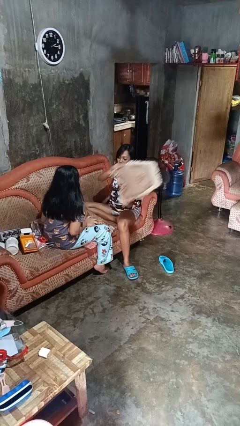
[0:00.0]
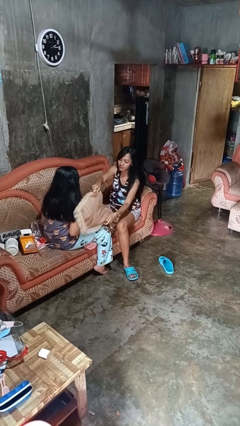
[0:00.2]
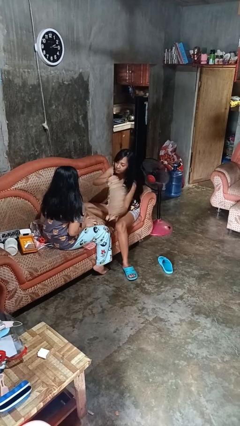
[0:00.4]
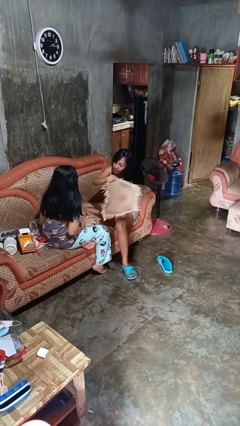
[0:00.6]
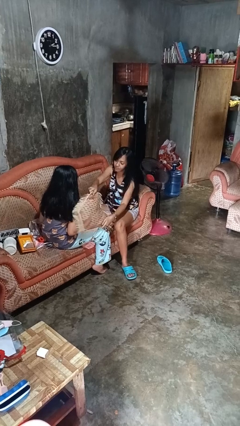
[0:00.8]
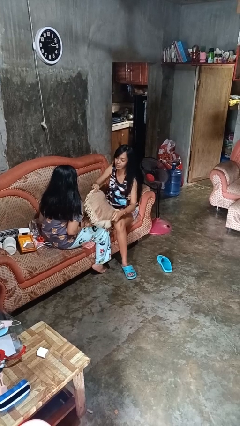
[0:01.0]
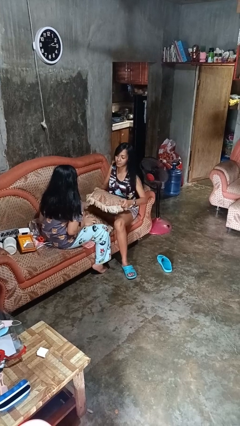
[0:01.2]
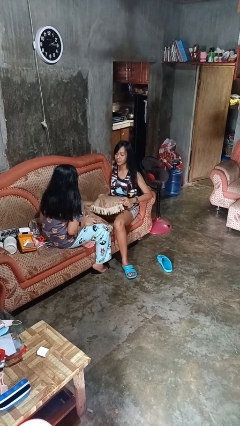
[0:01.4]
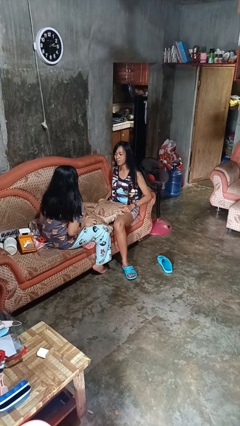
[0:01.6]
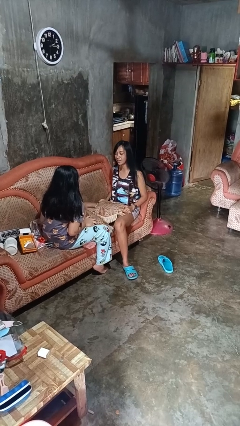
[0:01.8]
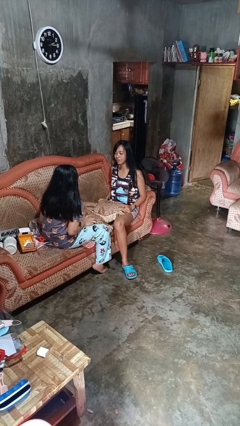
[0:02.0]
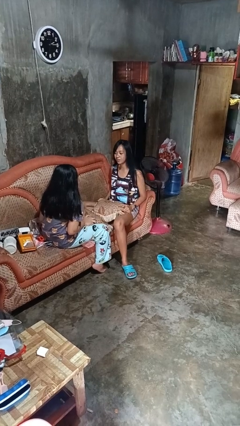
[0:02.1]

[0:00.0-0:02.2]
person hits person with pillow

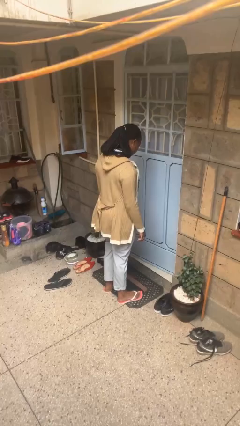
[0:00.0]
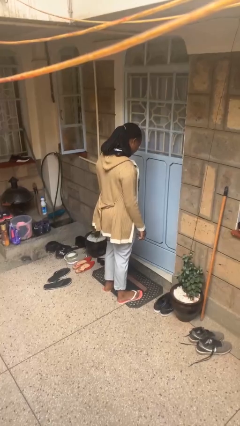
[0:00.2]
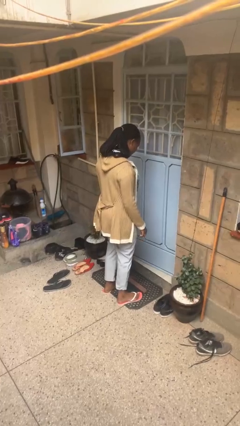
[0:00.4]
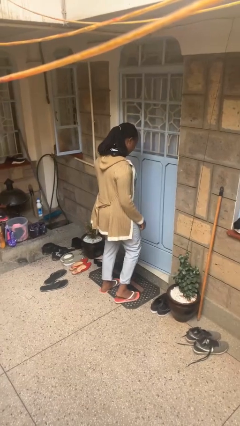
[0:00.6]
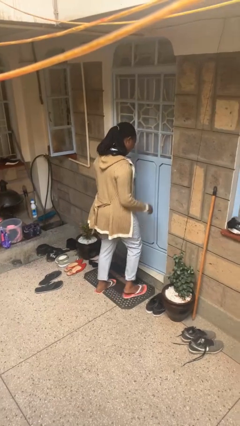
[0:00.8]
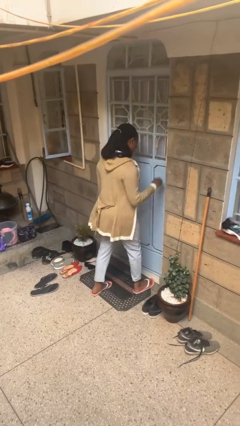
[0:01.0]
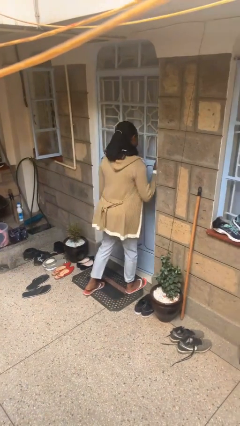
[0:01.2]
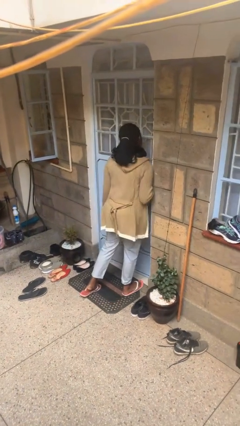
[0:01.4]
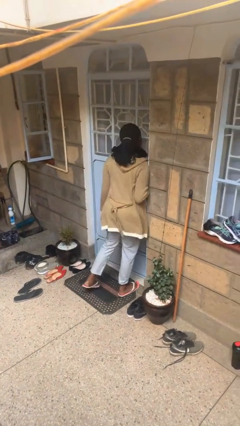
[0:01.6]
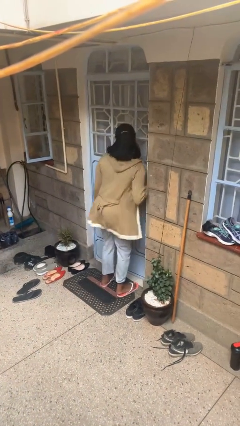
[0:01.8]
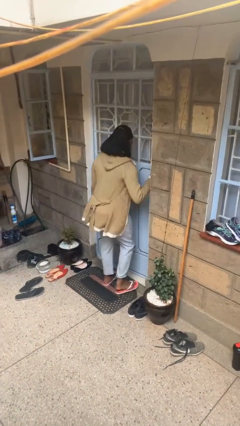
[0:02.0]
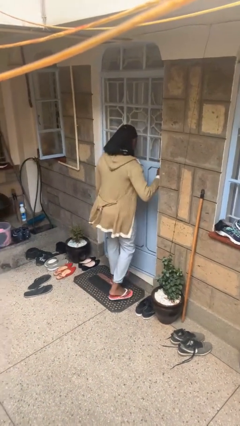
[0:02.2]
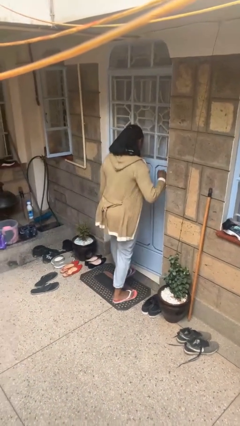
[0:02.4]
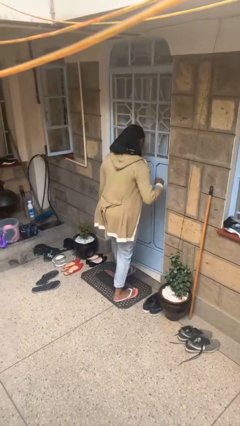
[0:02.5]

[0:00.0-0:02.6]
person bumps into wall

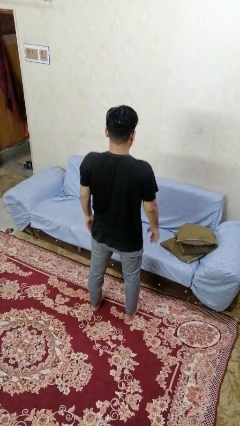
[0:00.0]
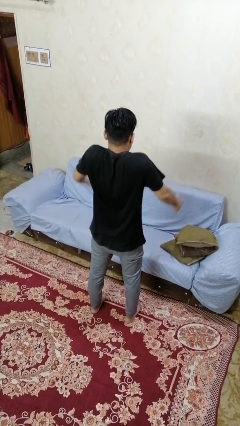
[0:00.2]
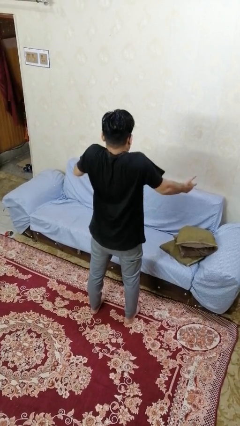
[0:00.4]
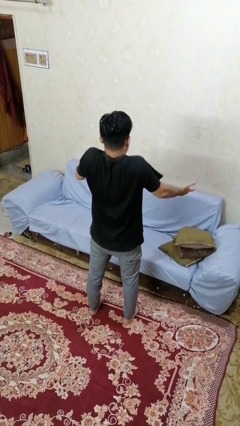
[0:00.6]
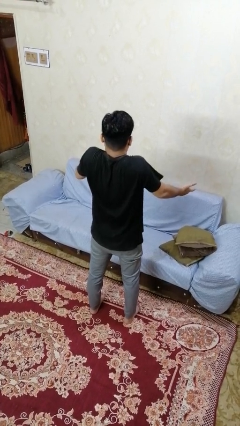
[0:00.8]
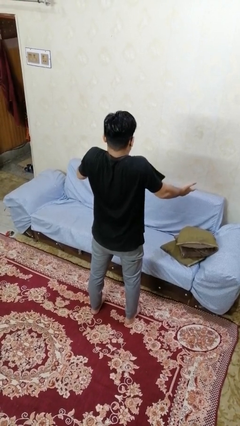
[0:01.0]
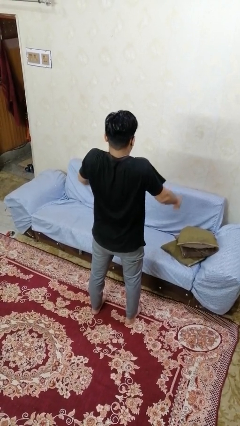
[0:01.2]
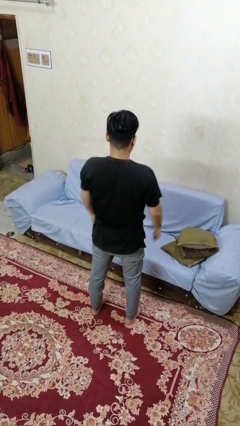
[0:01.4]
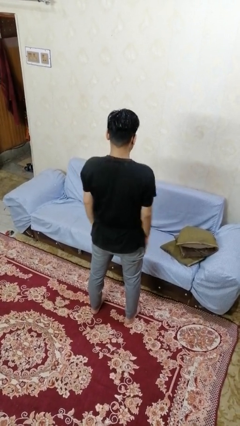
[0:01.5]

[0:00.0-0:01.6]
person shrugs

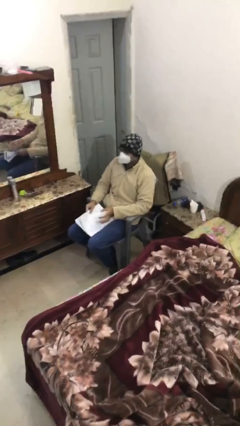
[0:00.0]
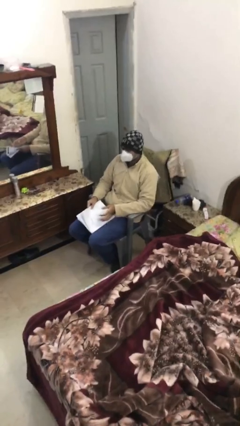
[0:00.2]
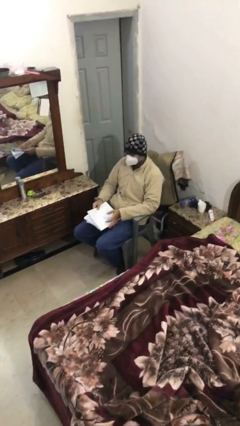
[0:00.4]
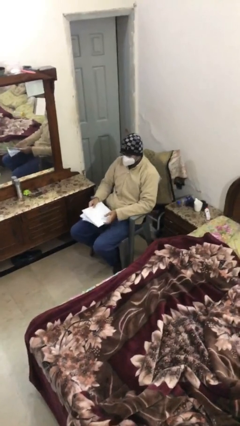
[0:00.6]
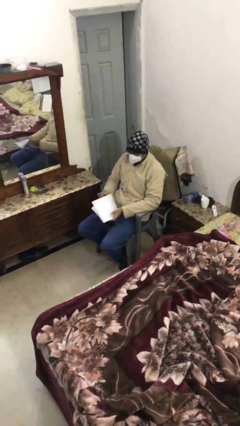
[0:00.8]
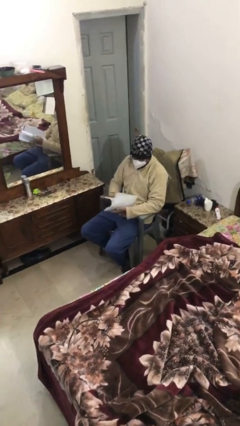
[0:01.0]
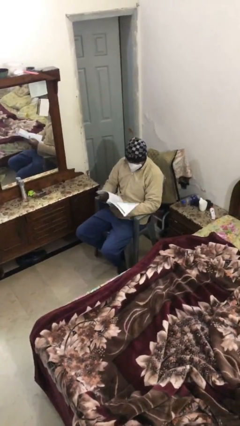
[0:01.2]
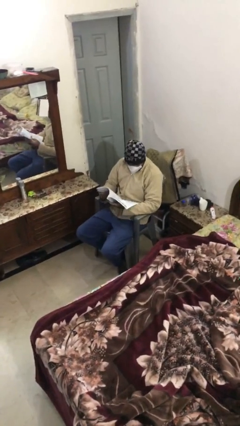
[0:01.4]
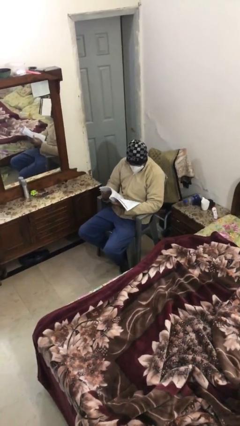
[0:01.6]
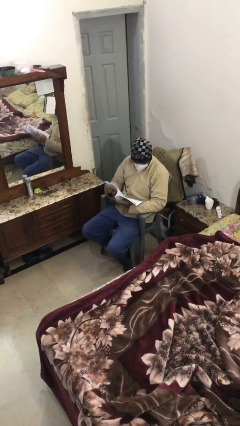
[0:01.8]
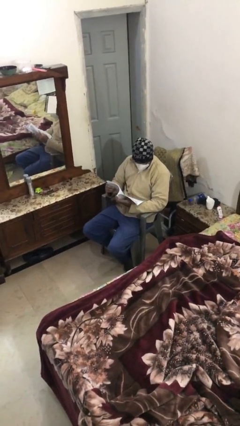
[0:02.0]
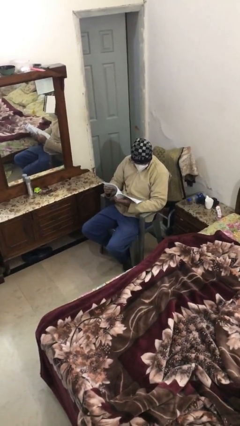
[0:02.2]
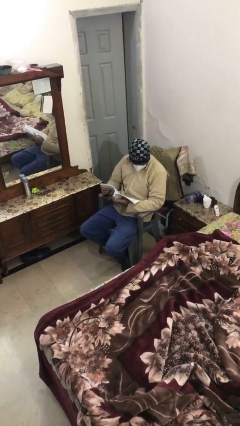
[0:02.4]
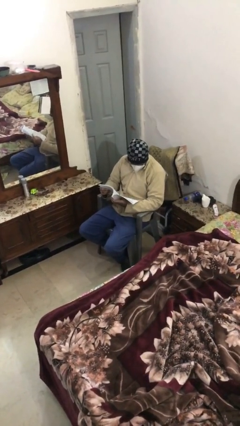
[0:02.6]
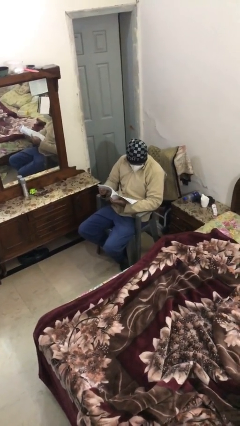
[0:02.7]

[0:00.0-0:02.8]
person reads document

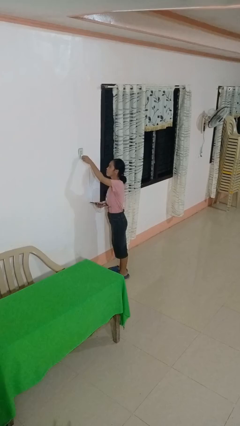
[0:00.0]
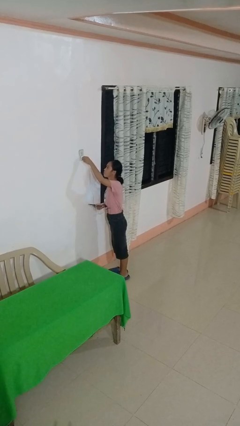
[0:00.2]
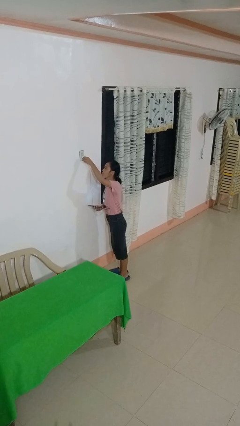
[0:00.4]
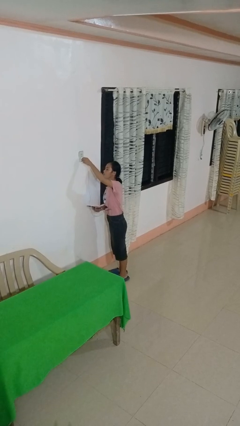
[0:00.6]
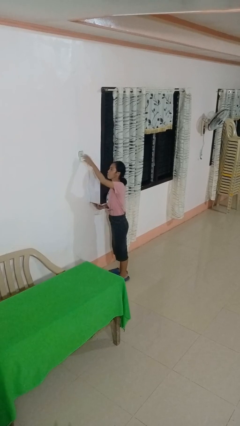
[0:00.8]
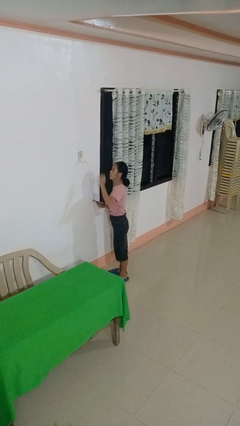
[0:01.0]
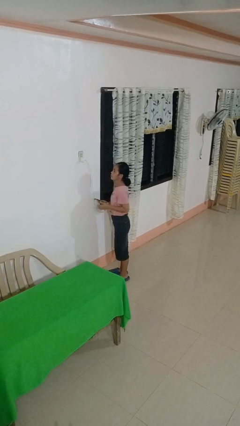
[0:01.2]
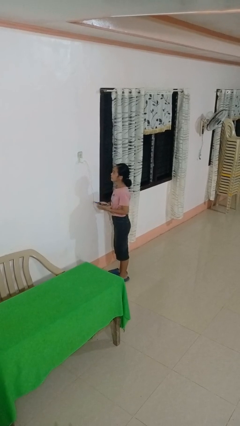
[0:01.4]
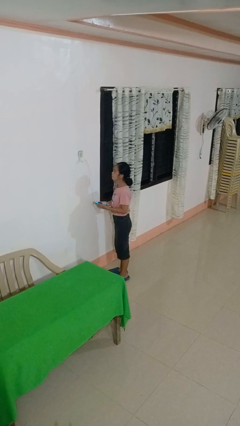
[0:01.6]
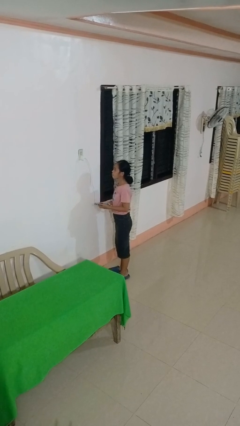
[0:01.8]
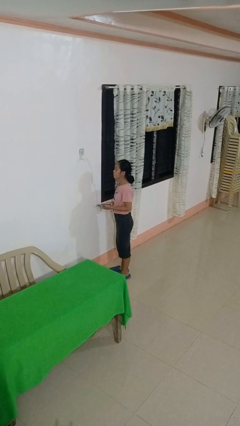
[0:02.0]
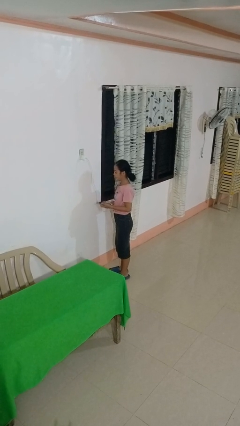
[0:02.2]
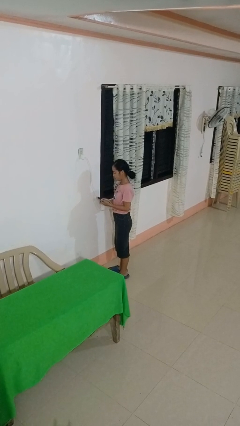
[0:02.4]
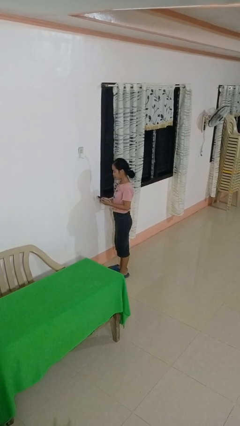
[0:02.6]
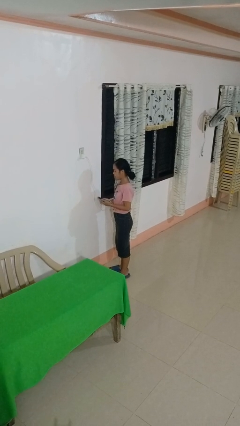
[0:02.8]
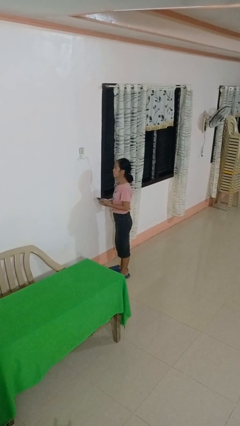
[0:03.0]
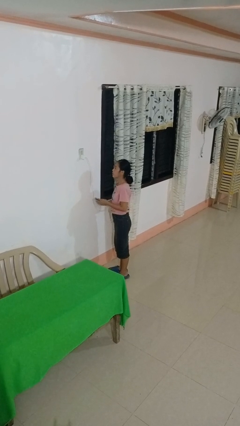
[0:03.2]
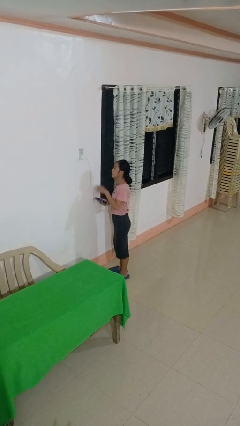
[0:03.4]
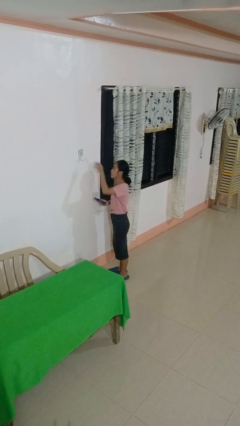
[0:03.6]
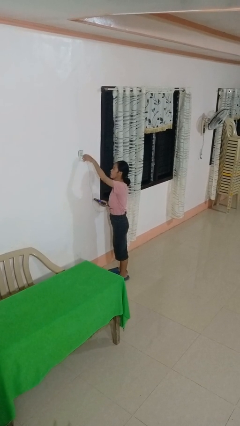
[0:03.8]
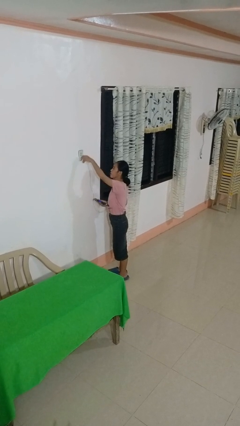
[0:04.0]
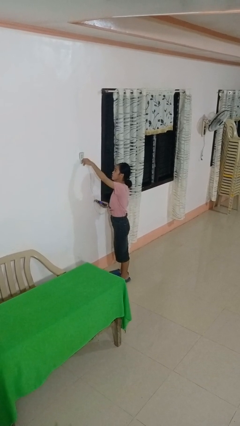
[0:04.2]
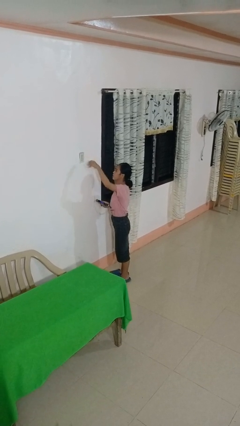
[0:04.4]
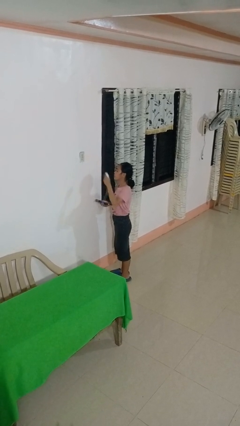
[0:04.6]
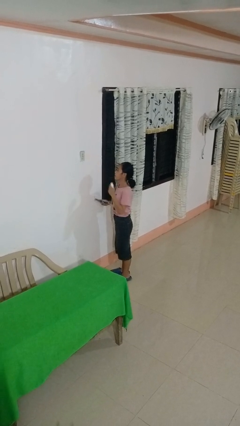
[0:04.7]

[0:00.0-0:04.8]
person plugs into electrical socket

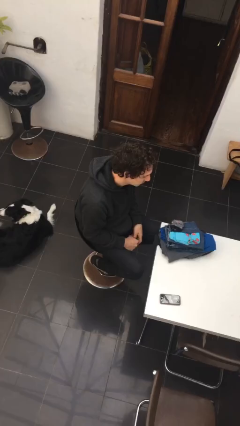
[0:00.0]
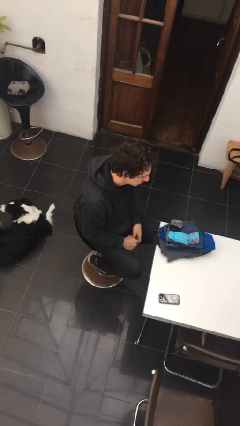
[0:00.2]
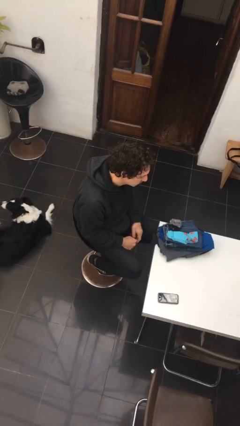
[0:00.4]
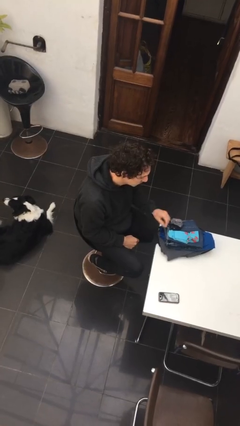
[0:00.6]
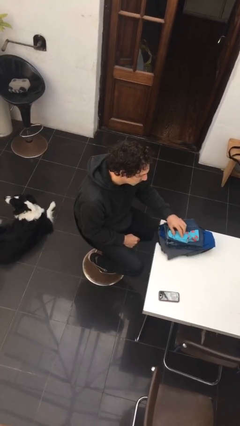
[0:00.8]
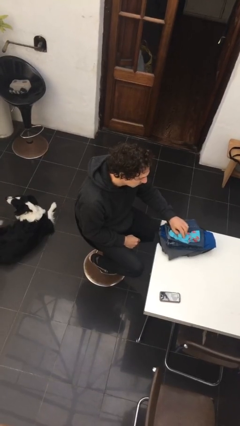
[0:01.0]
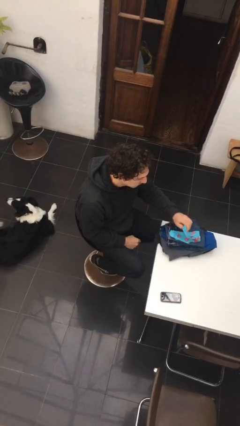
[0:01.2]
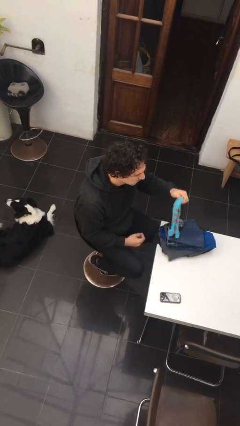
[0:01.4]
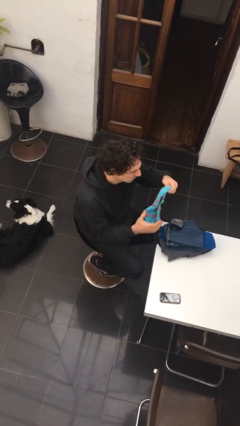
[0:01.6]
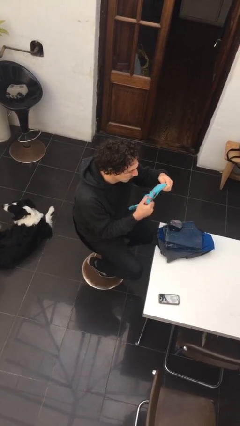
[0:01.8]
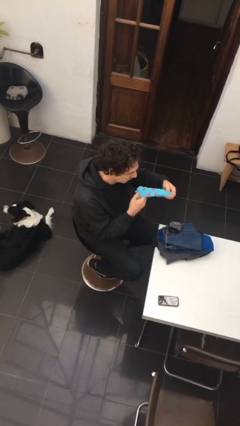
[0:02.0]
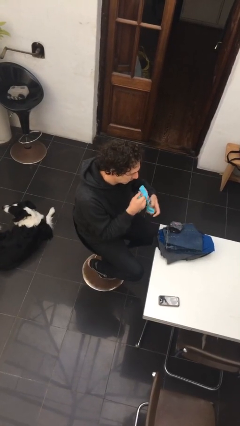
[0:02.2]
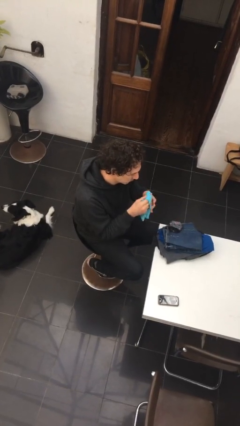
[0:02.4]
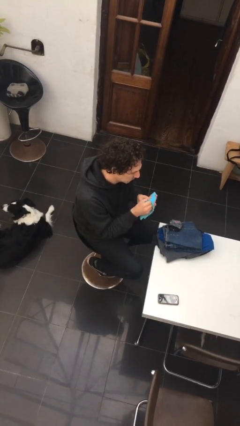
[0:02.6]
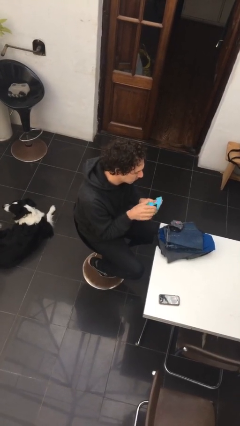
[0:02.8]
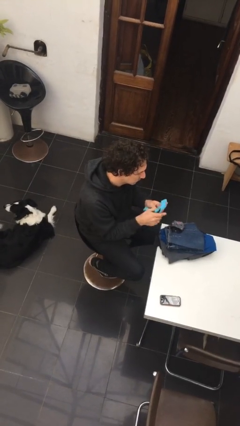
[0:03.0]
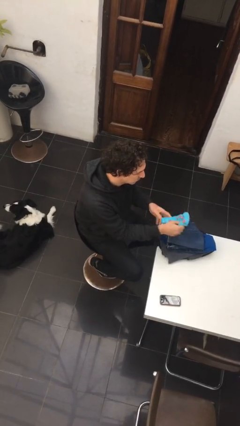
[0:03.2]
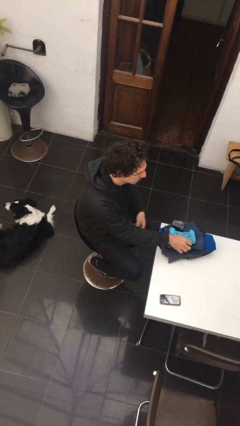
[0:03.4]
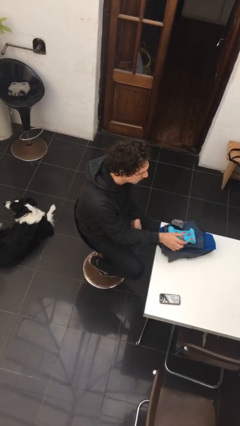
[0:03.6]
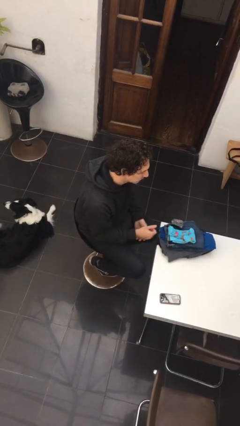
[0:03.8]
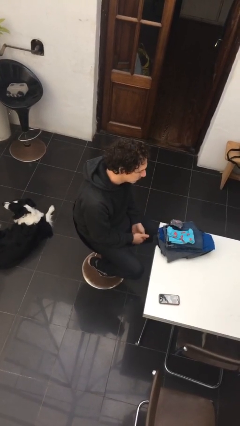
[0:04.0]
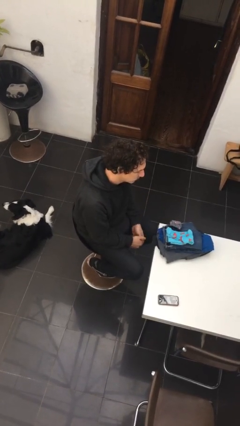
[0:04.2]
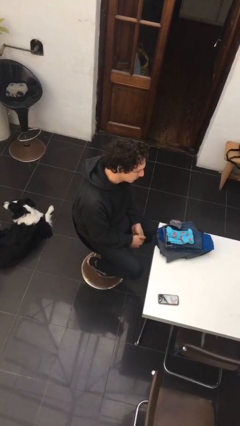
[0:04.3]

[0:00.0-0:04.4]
person folds socks
